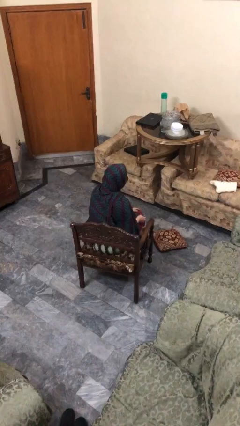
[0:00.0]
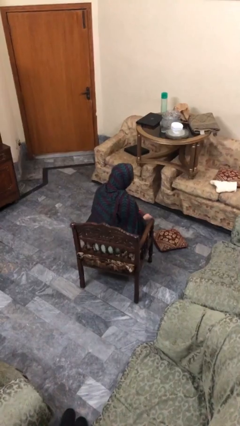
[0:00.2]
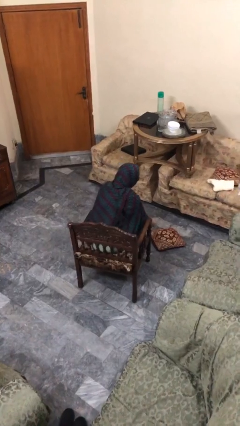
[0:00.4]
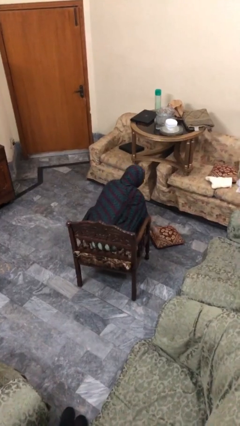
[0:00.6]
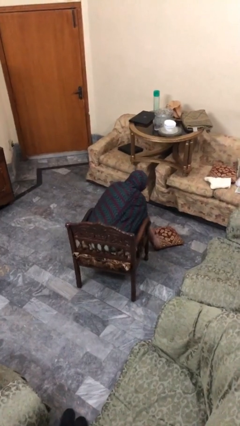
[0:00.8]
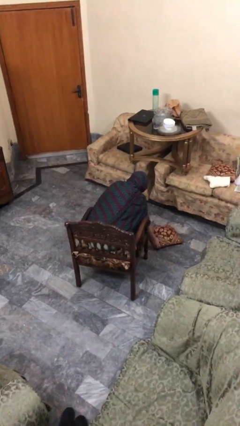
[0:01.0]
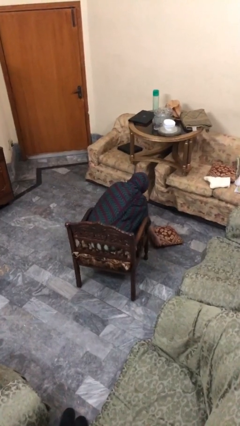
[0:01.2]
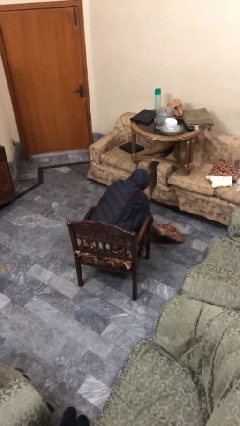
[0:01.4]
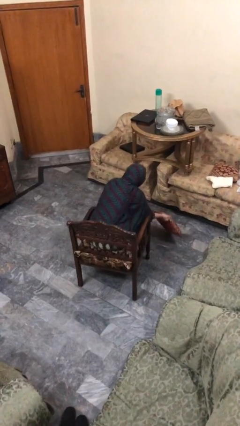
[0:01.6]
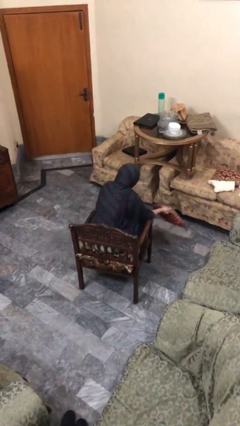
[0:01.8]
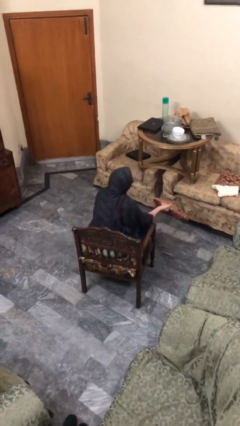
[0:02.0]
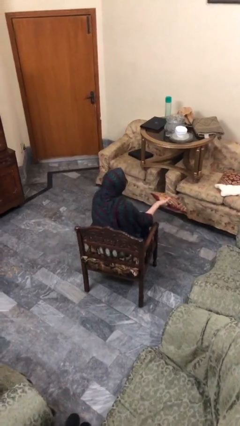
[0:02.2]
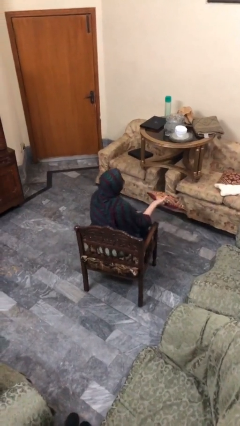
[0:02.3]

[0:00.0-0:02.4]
person picks up object from floor

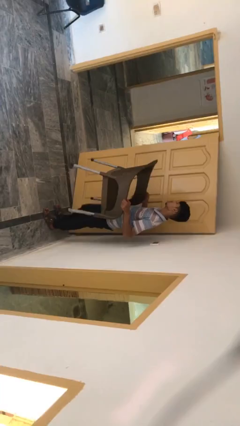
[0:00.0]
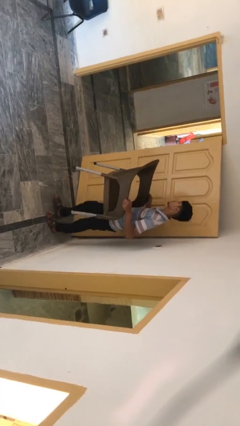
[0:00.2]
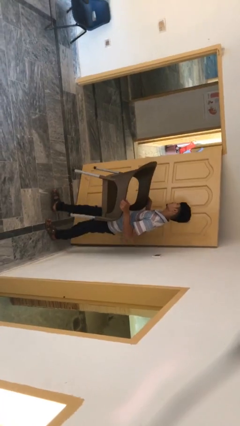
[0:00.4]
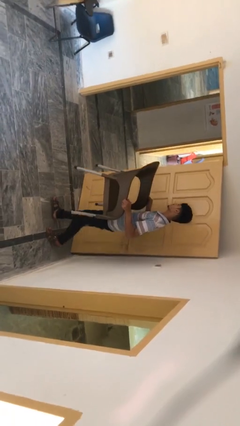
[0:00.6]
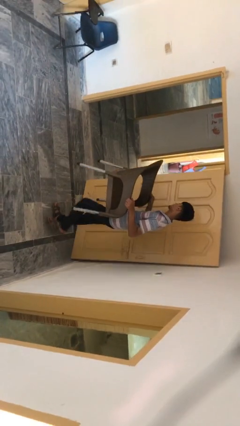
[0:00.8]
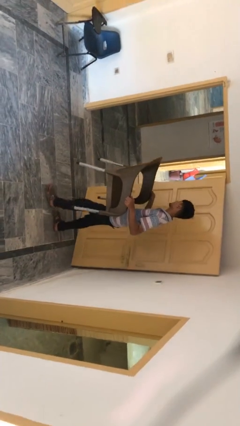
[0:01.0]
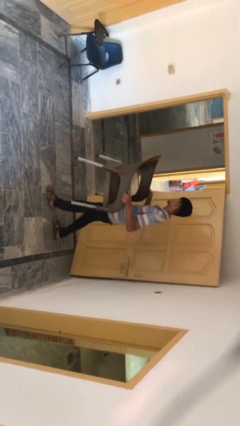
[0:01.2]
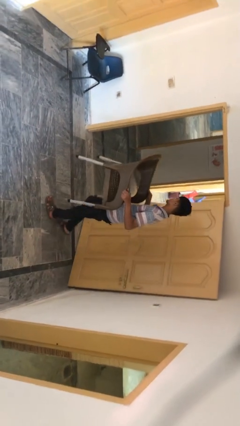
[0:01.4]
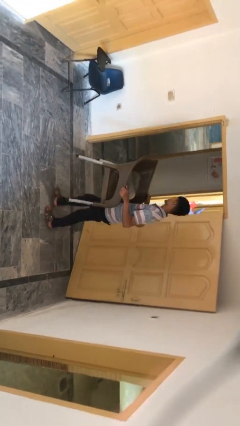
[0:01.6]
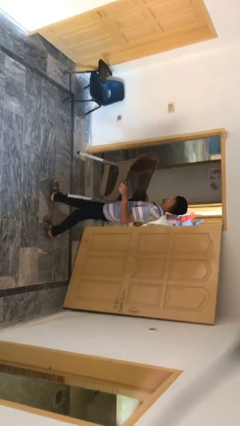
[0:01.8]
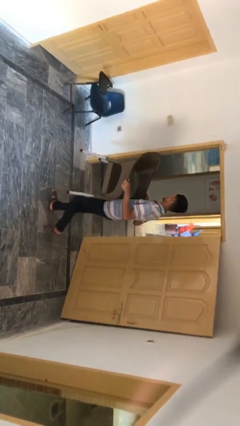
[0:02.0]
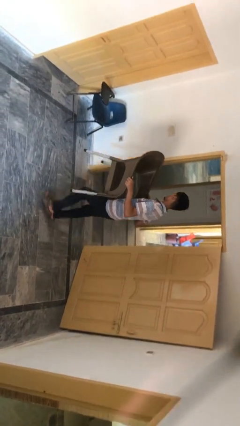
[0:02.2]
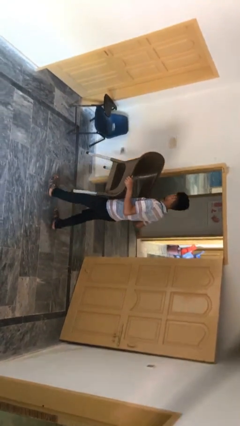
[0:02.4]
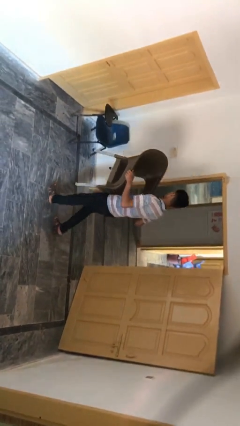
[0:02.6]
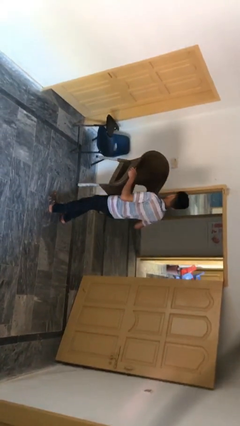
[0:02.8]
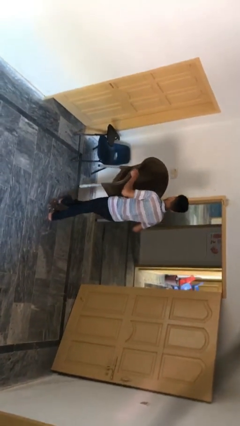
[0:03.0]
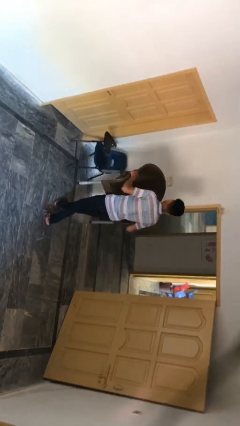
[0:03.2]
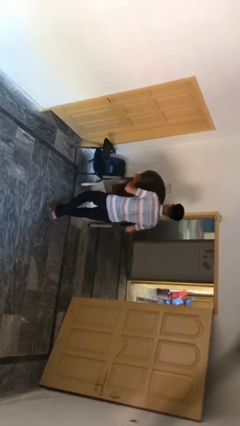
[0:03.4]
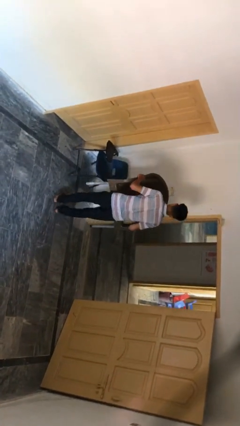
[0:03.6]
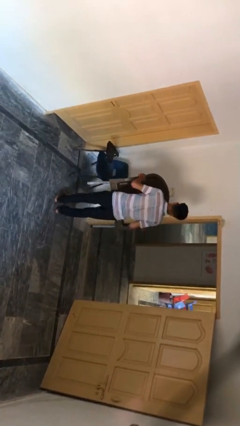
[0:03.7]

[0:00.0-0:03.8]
person carries heavy object

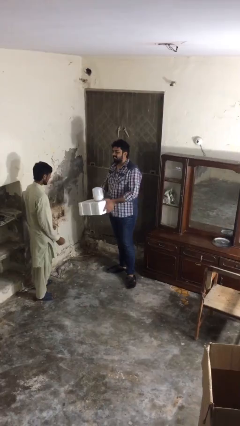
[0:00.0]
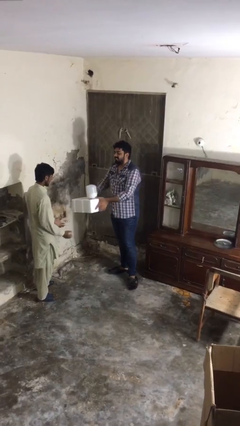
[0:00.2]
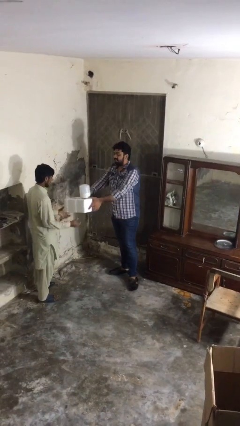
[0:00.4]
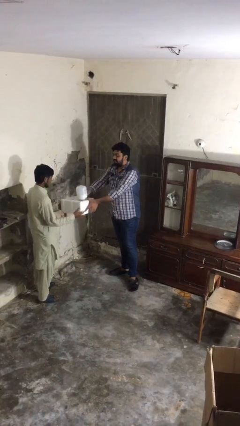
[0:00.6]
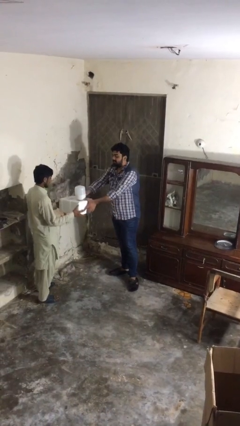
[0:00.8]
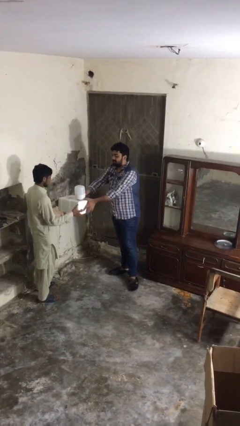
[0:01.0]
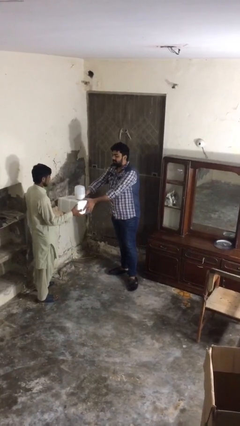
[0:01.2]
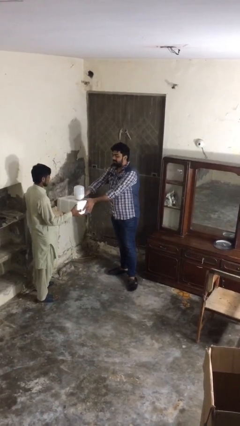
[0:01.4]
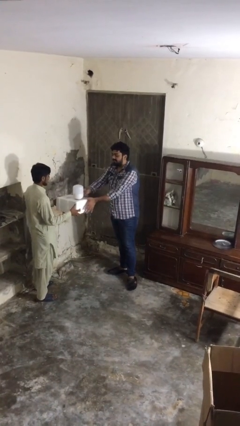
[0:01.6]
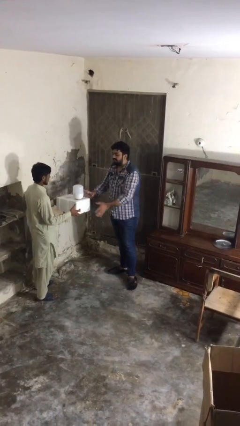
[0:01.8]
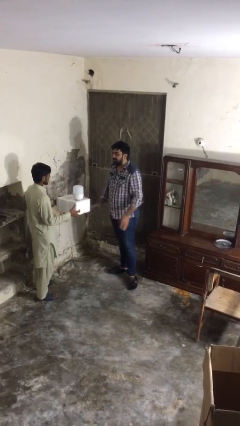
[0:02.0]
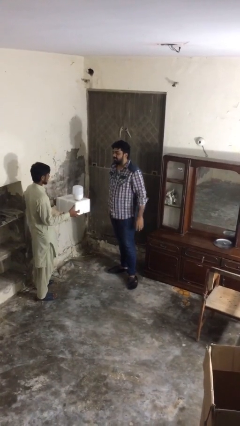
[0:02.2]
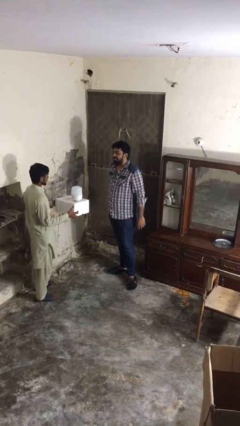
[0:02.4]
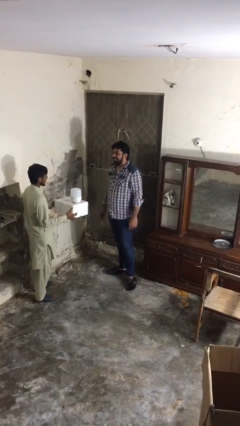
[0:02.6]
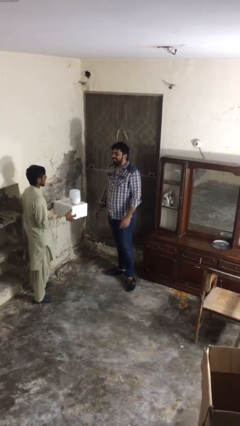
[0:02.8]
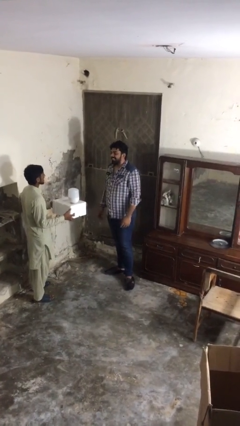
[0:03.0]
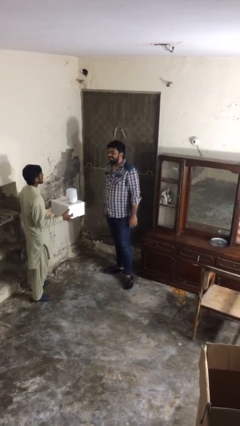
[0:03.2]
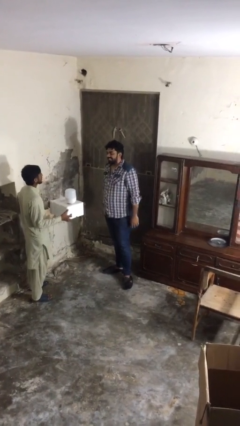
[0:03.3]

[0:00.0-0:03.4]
person transfers object to person

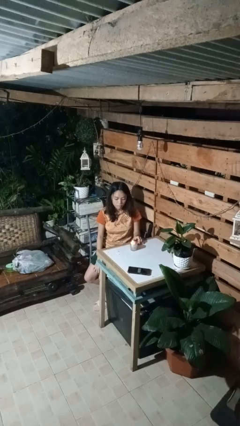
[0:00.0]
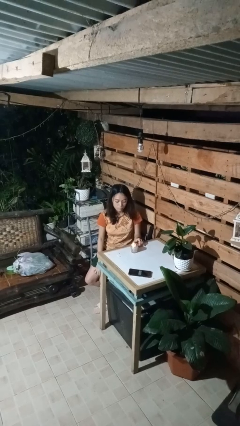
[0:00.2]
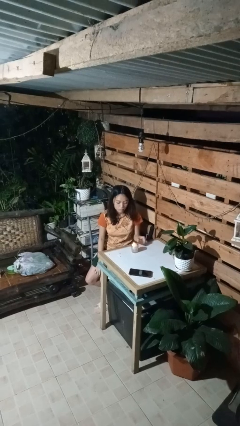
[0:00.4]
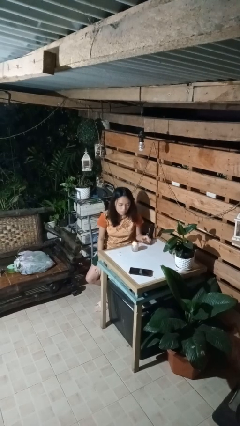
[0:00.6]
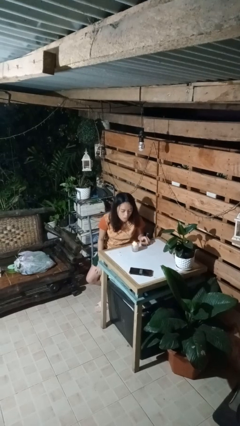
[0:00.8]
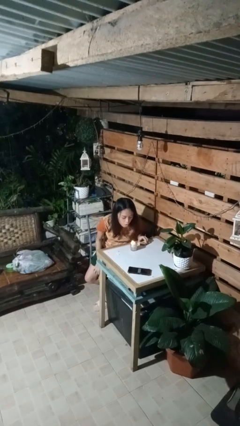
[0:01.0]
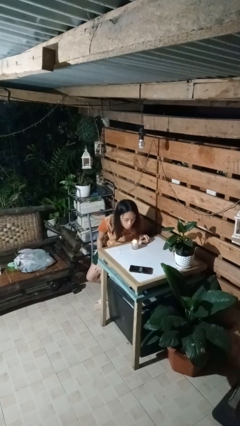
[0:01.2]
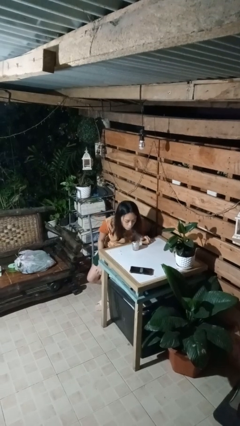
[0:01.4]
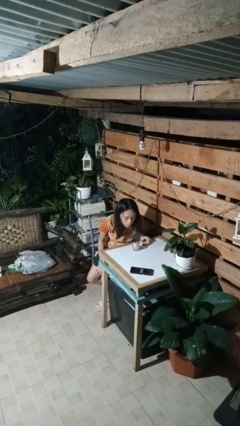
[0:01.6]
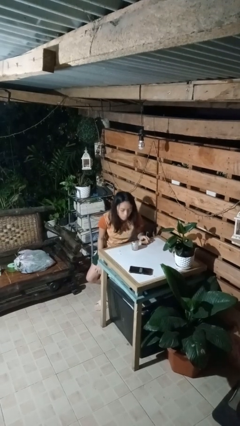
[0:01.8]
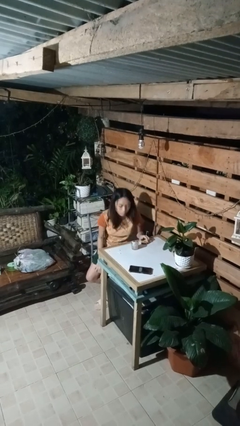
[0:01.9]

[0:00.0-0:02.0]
person extinguishes candle

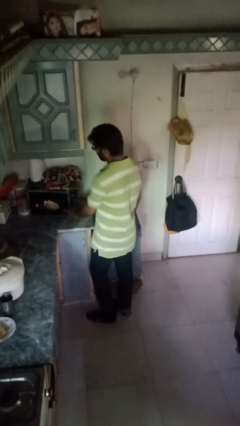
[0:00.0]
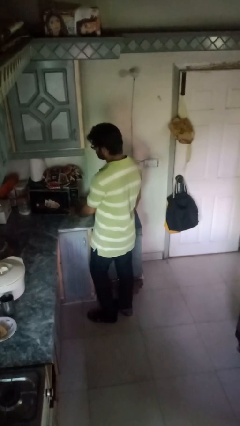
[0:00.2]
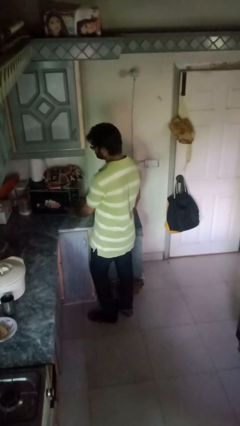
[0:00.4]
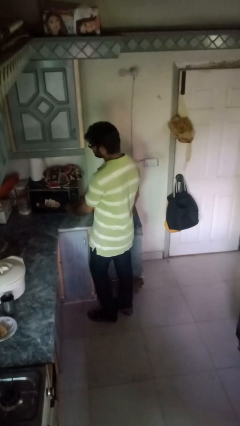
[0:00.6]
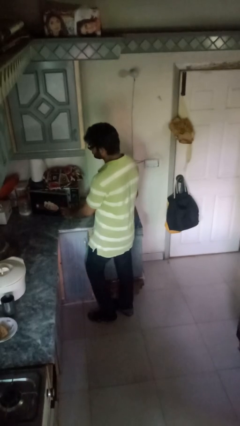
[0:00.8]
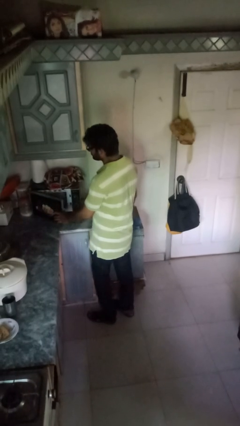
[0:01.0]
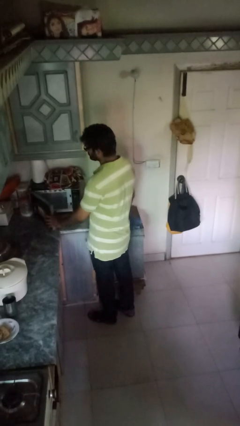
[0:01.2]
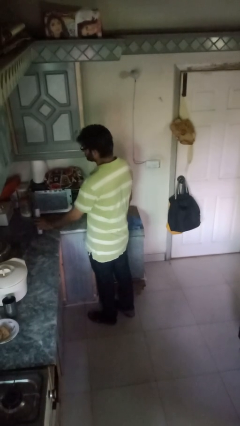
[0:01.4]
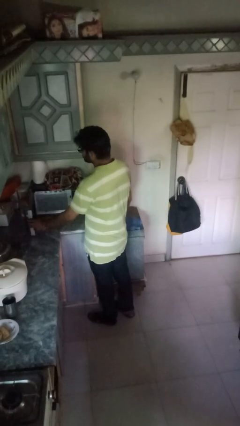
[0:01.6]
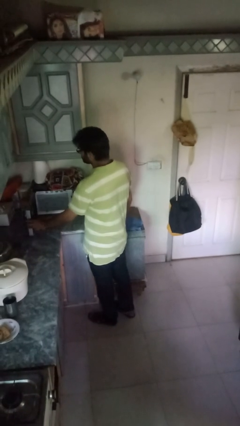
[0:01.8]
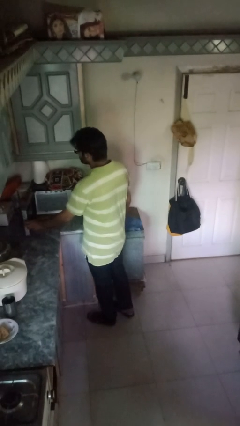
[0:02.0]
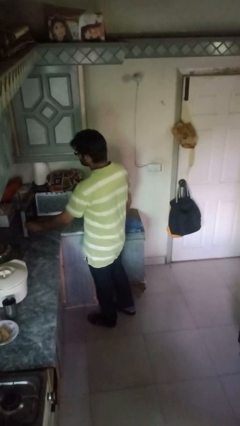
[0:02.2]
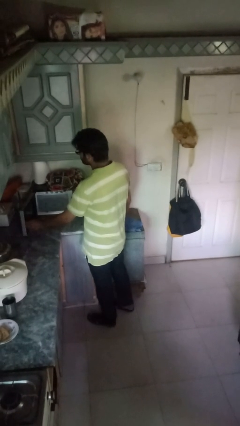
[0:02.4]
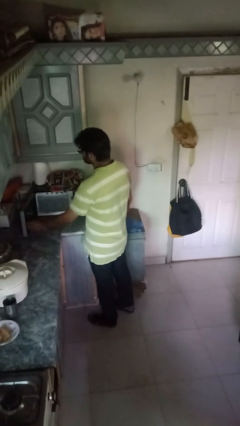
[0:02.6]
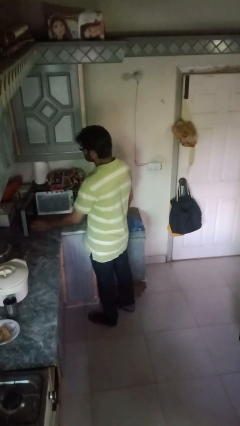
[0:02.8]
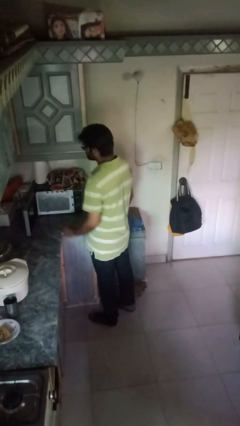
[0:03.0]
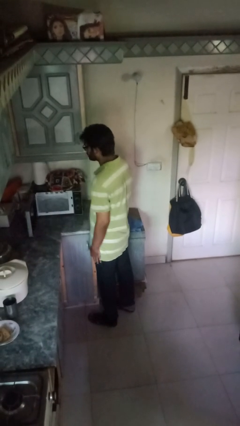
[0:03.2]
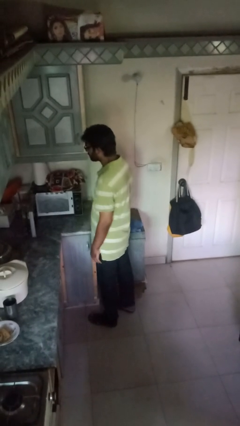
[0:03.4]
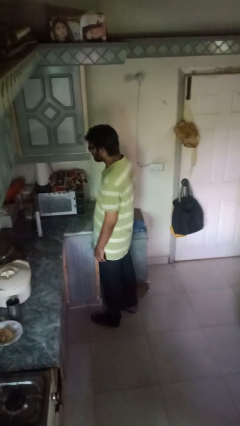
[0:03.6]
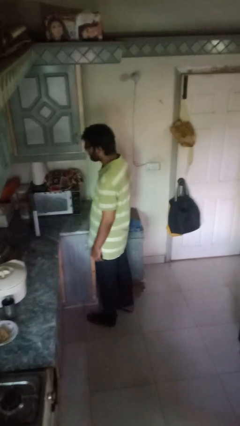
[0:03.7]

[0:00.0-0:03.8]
person opens oven door

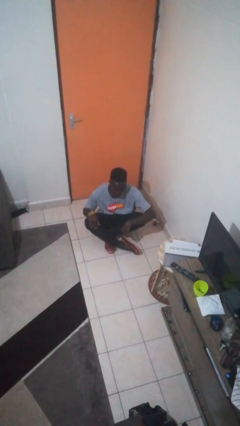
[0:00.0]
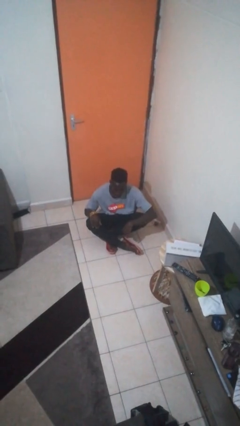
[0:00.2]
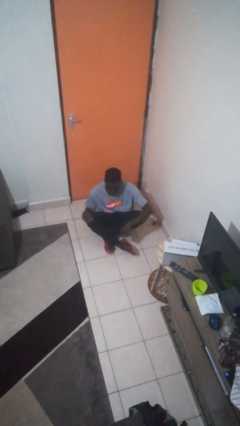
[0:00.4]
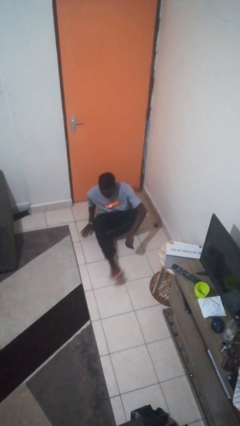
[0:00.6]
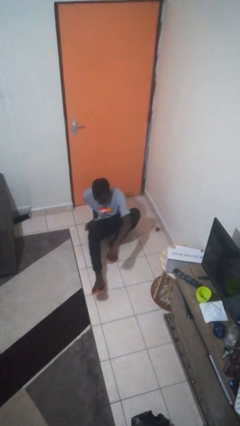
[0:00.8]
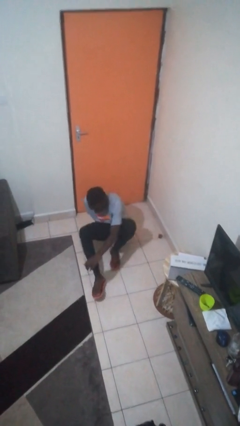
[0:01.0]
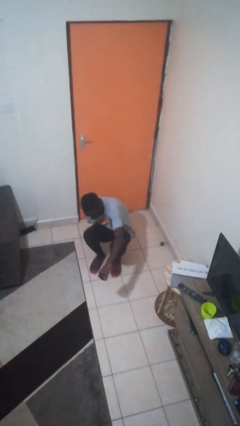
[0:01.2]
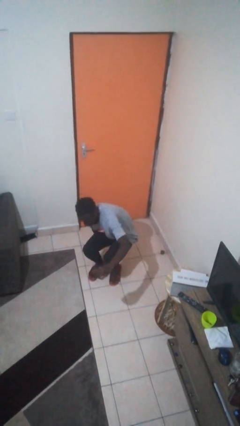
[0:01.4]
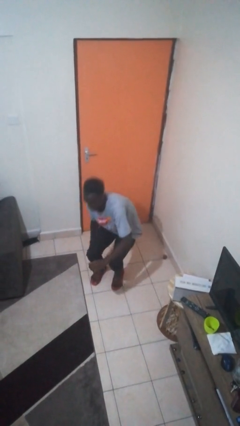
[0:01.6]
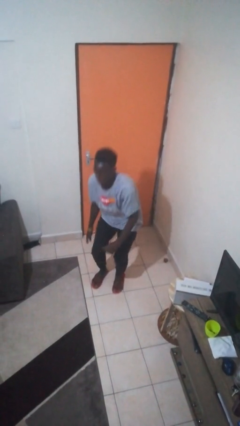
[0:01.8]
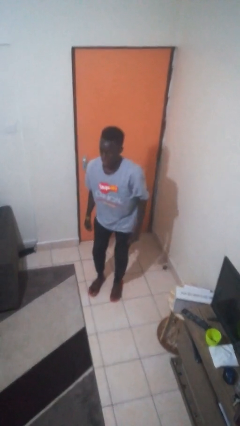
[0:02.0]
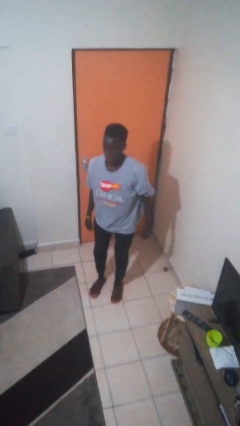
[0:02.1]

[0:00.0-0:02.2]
person stands up from floor
